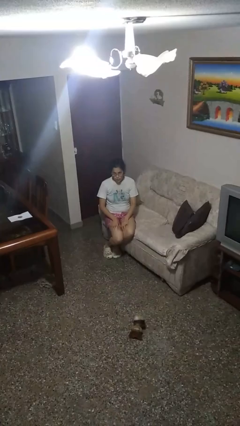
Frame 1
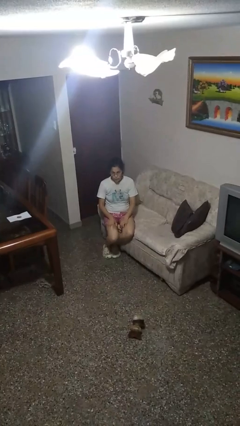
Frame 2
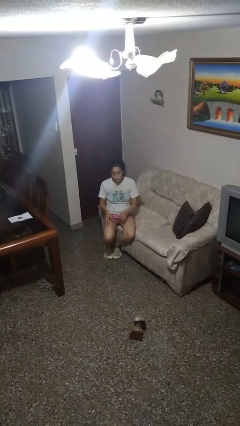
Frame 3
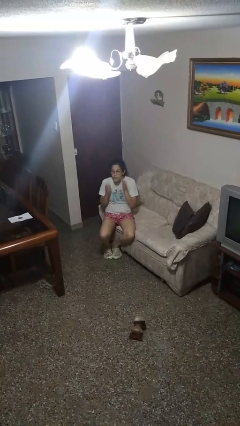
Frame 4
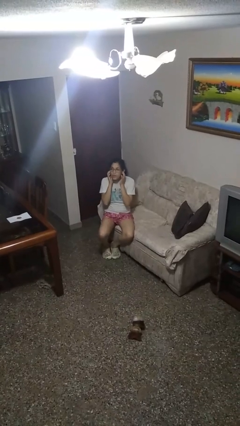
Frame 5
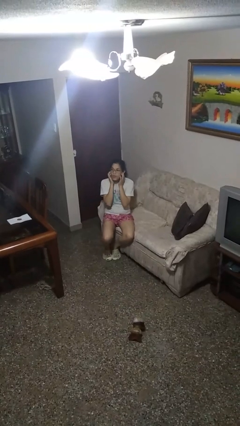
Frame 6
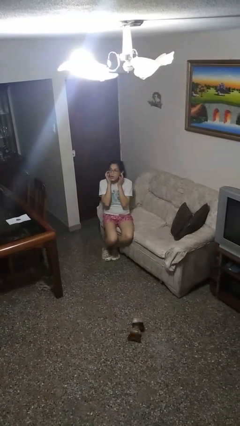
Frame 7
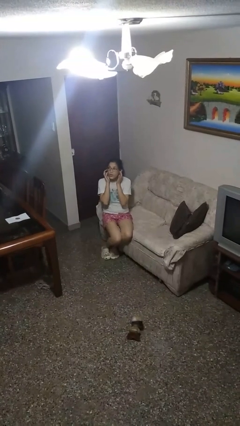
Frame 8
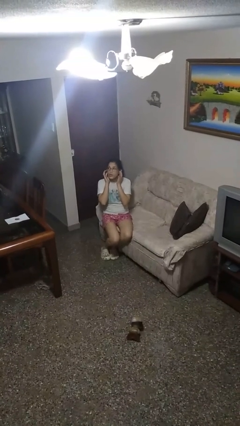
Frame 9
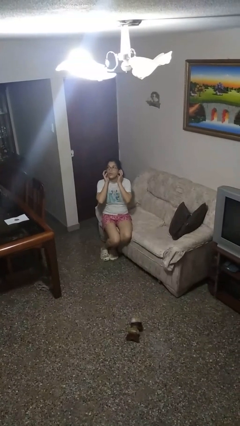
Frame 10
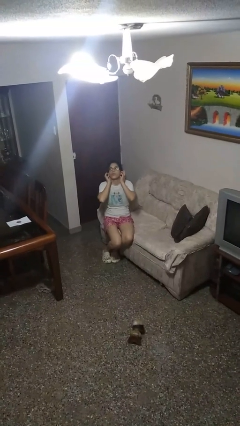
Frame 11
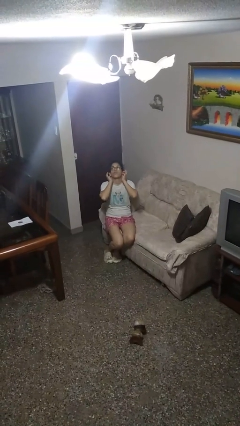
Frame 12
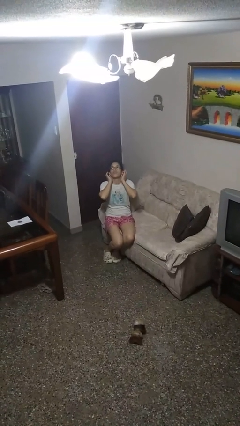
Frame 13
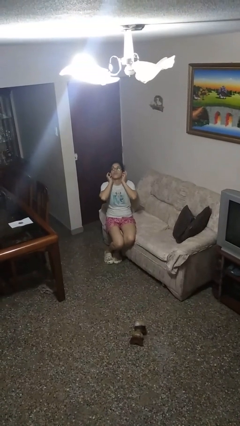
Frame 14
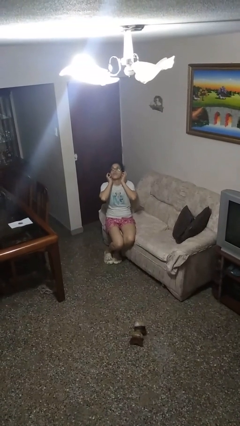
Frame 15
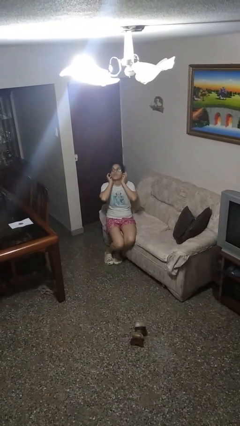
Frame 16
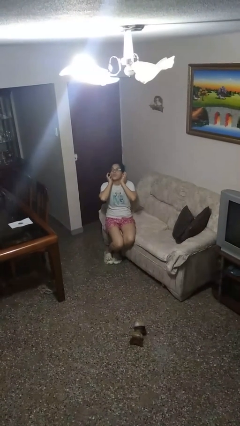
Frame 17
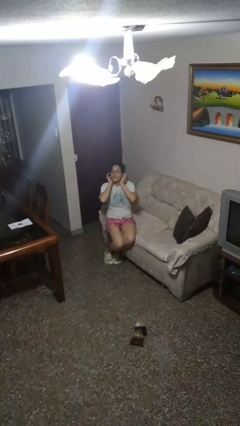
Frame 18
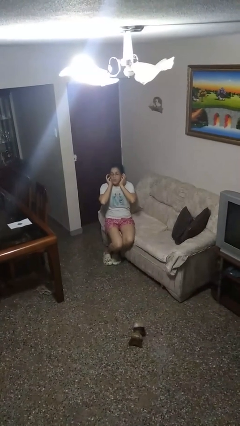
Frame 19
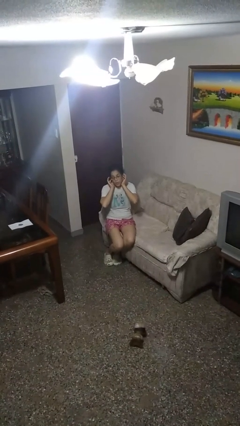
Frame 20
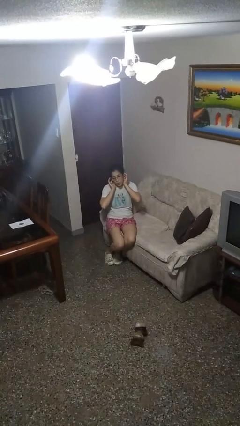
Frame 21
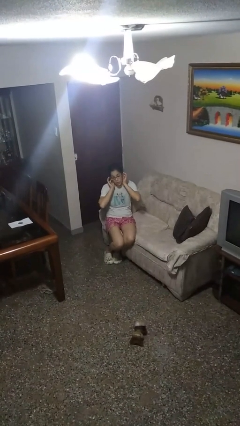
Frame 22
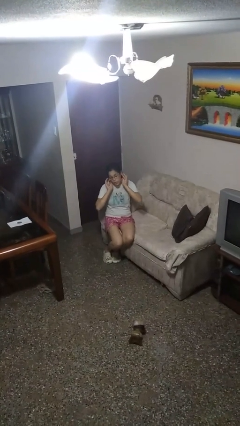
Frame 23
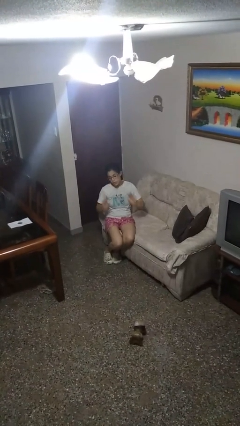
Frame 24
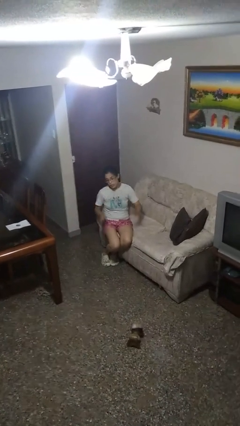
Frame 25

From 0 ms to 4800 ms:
person puts fingers in ear

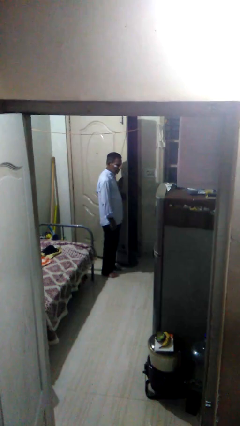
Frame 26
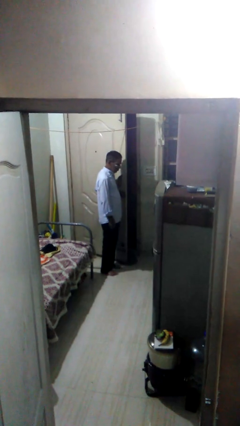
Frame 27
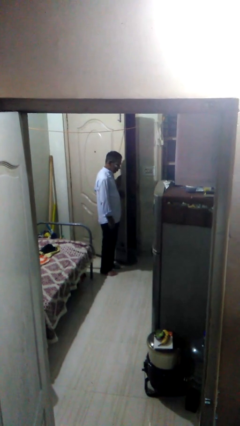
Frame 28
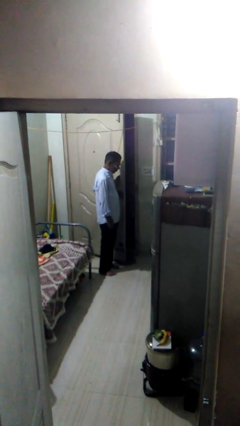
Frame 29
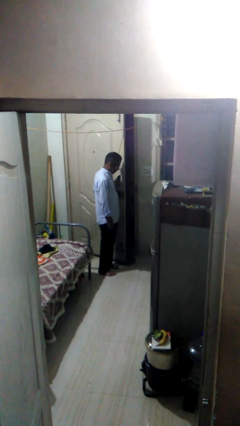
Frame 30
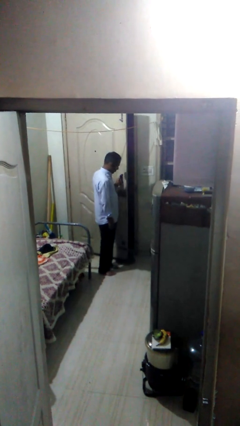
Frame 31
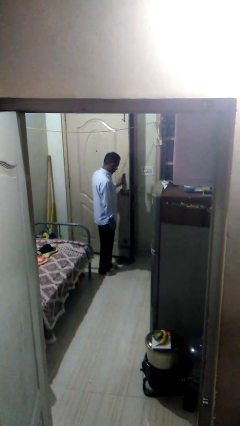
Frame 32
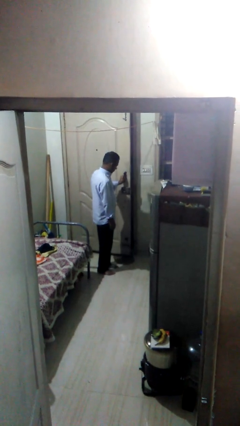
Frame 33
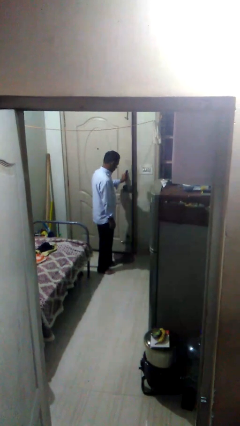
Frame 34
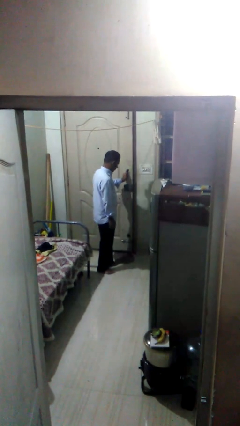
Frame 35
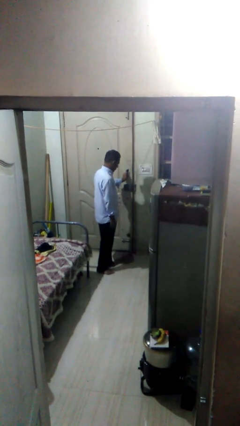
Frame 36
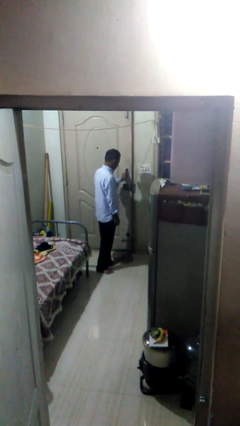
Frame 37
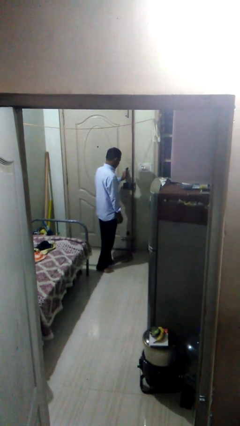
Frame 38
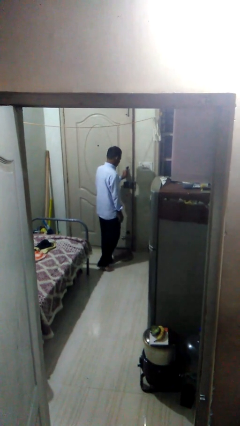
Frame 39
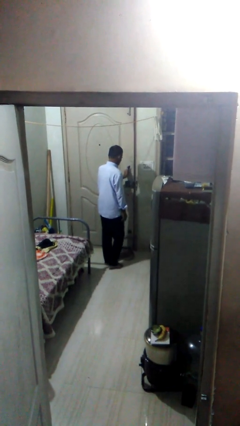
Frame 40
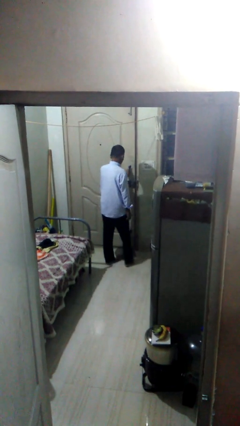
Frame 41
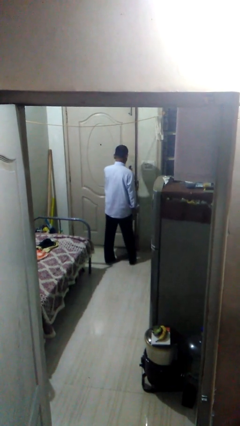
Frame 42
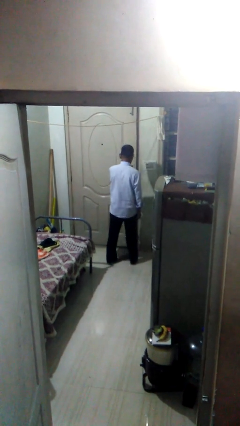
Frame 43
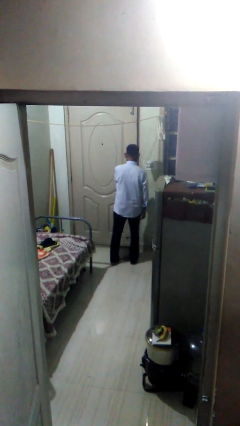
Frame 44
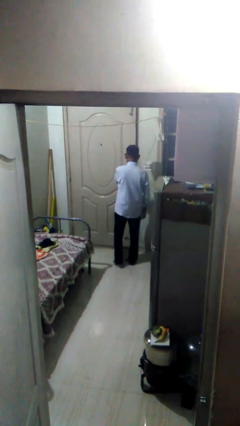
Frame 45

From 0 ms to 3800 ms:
person closes facility door

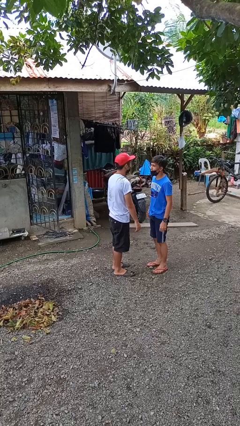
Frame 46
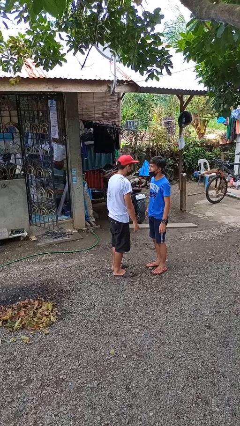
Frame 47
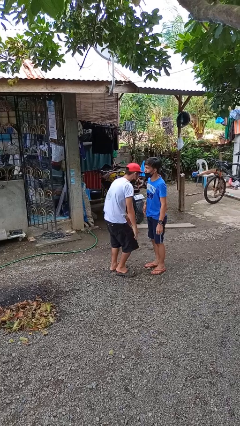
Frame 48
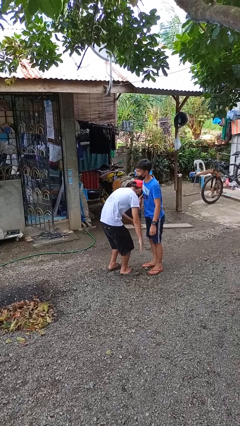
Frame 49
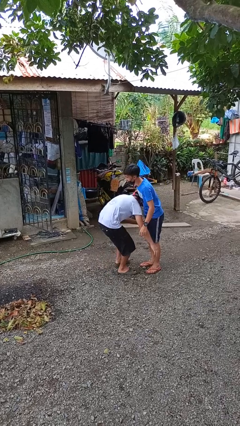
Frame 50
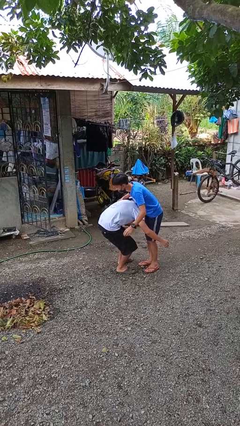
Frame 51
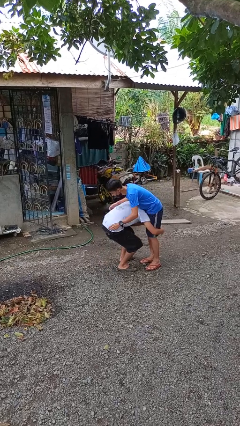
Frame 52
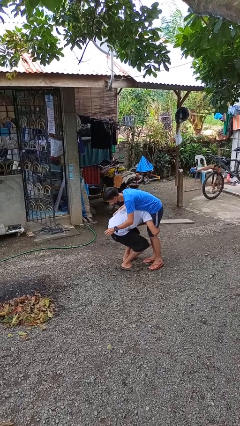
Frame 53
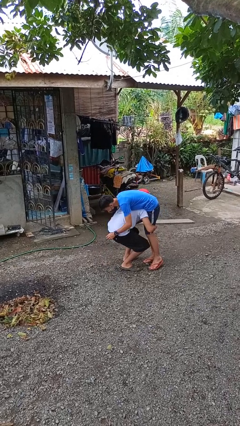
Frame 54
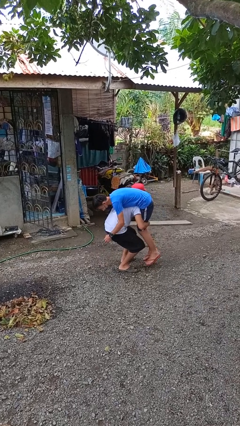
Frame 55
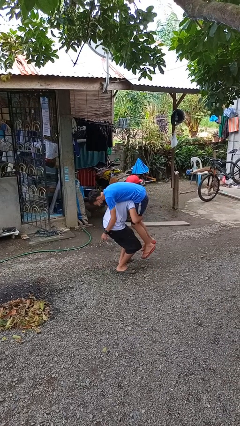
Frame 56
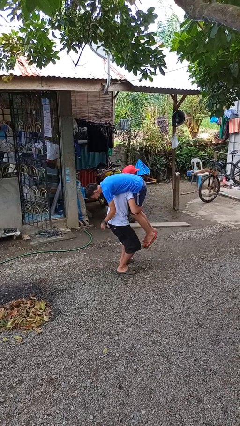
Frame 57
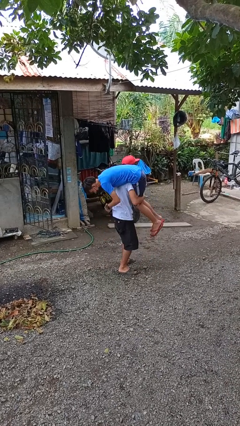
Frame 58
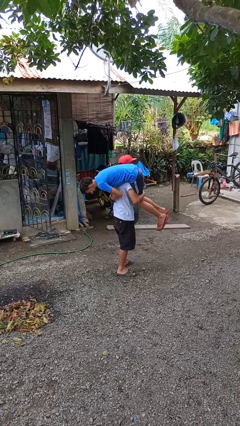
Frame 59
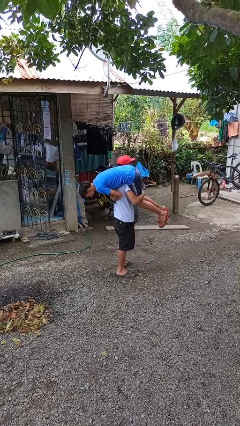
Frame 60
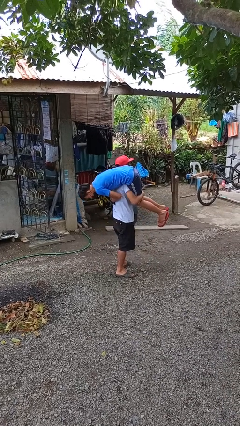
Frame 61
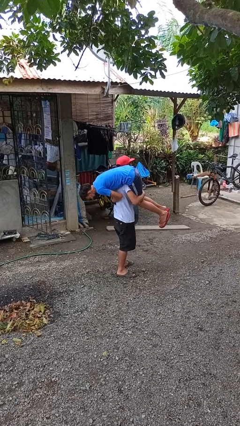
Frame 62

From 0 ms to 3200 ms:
person carries person over shoulder

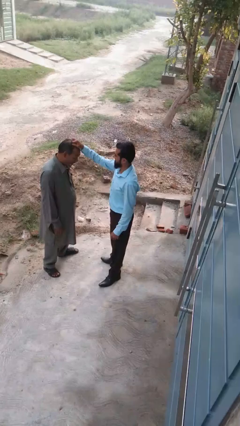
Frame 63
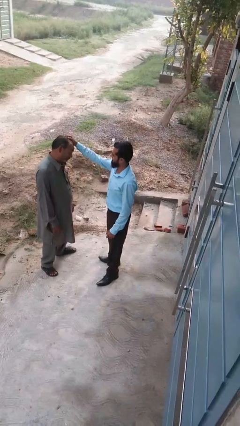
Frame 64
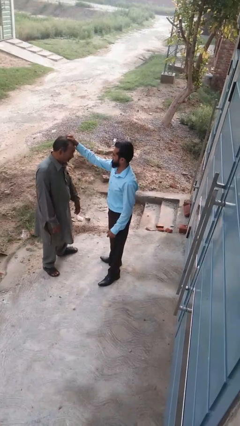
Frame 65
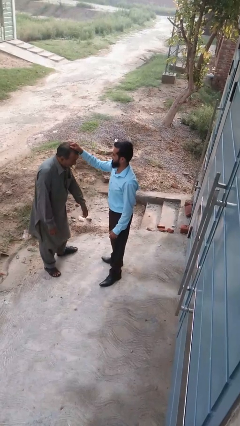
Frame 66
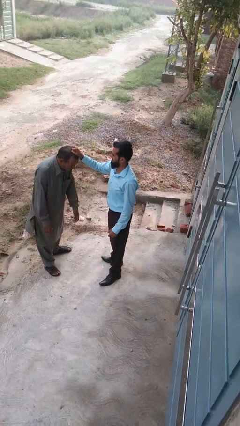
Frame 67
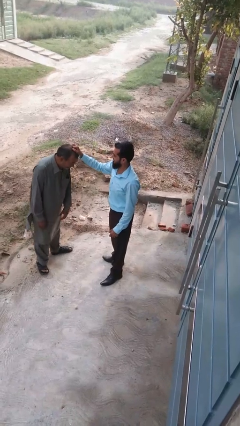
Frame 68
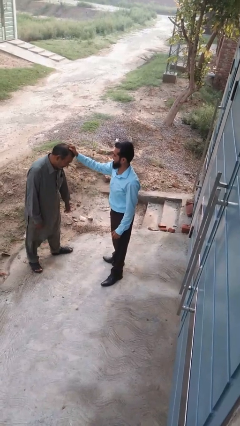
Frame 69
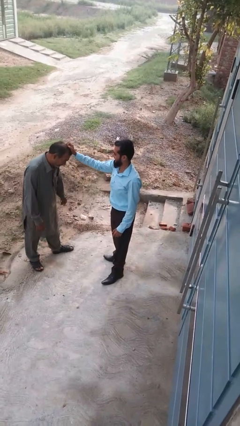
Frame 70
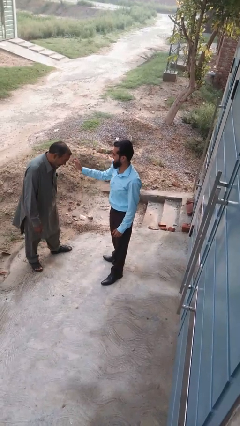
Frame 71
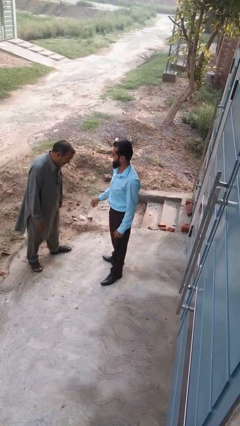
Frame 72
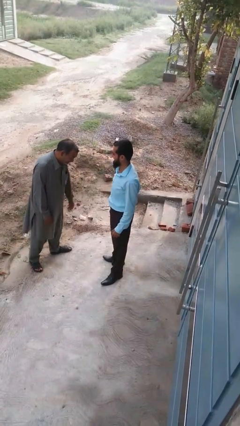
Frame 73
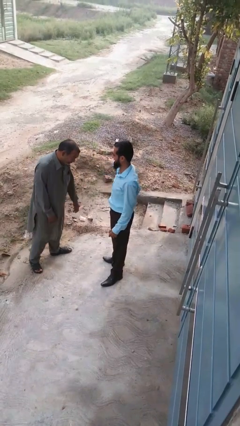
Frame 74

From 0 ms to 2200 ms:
person grabs person by hair

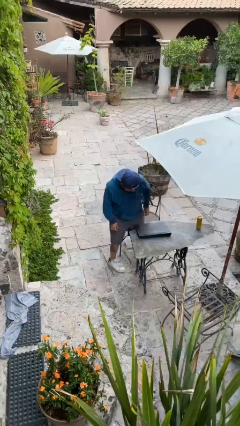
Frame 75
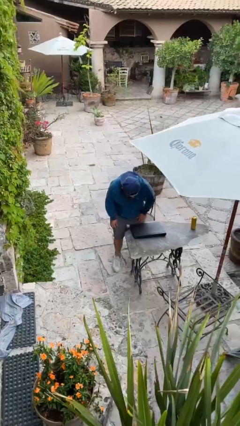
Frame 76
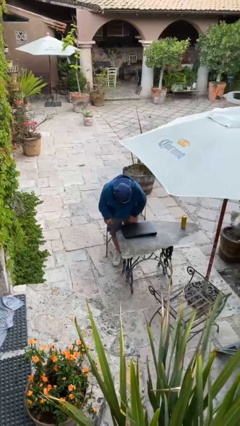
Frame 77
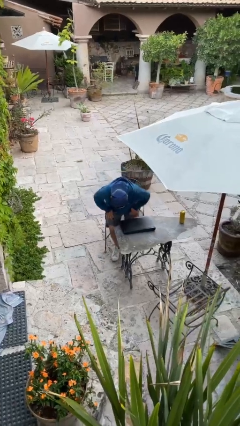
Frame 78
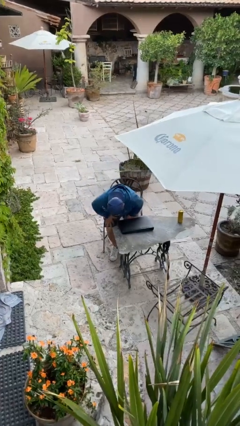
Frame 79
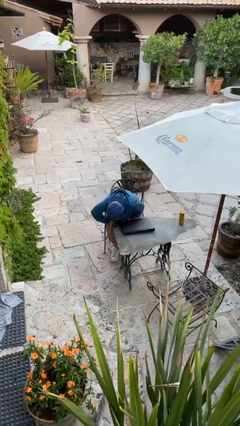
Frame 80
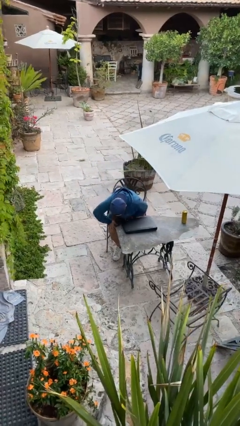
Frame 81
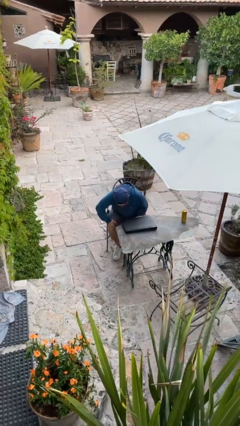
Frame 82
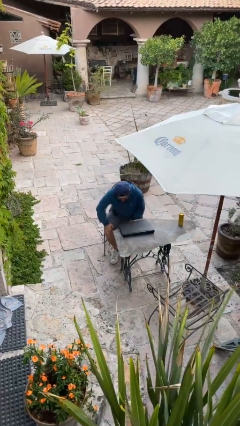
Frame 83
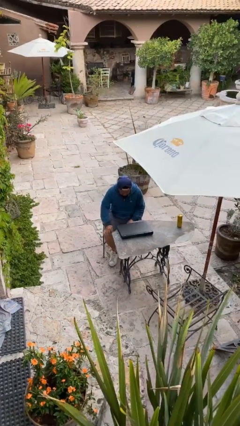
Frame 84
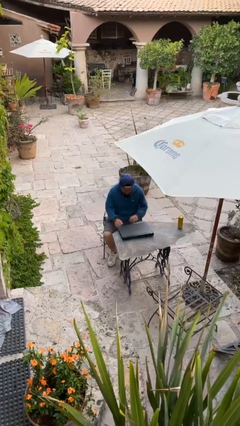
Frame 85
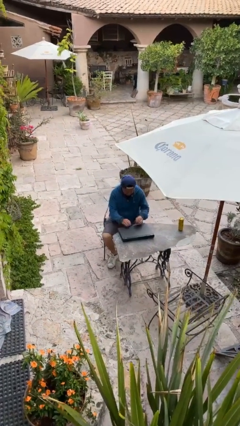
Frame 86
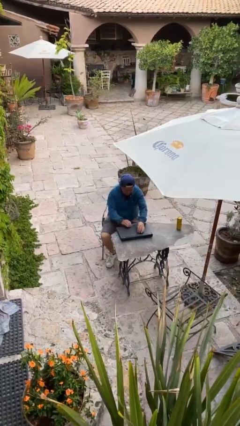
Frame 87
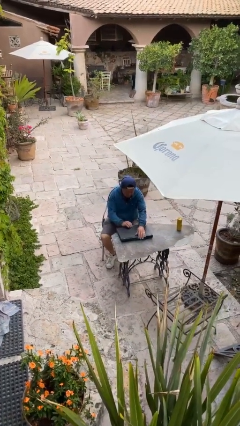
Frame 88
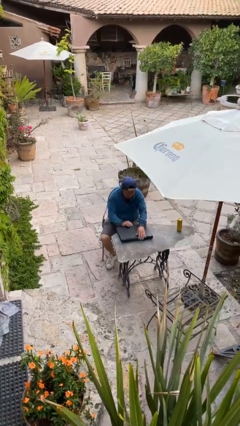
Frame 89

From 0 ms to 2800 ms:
person sits down

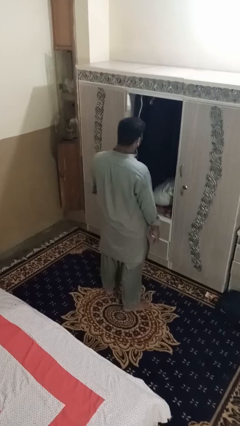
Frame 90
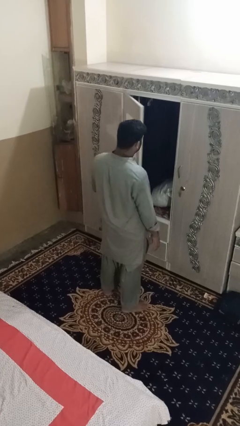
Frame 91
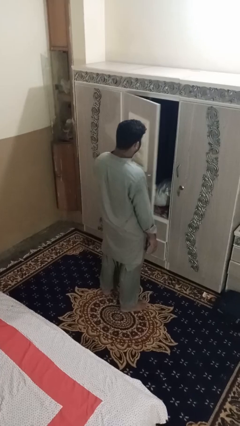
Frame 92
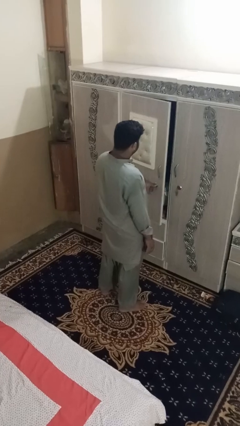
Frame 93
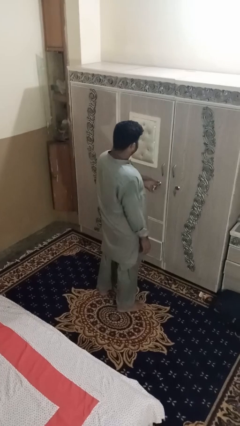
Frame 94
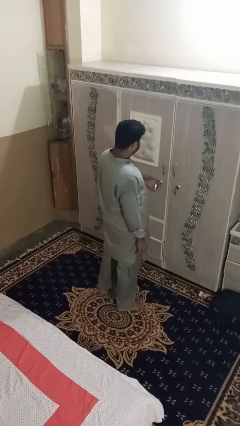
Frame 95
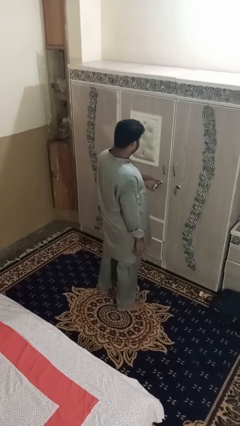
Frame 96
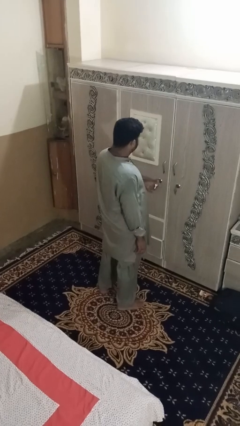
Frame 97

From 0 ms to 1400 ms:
person closes dresser drawer
